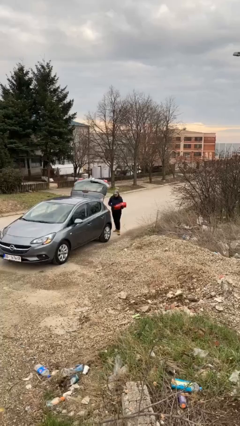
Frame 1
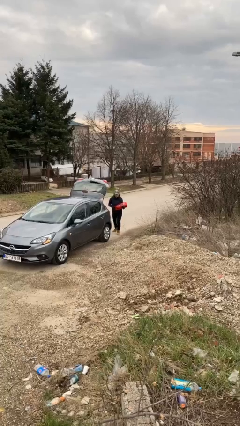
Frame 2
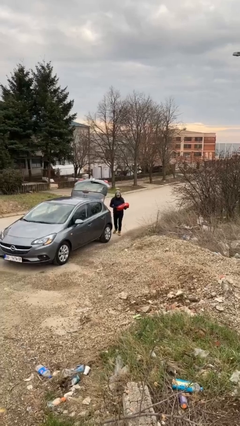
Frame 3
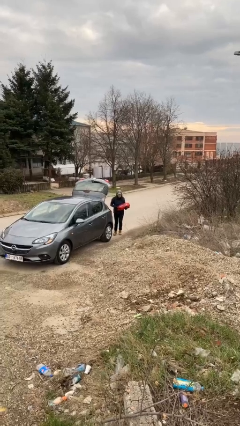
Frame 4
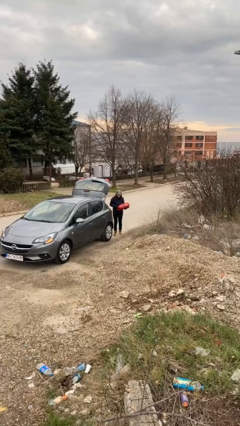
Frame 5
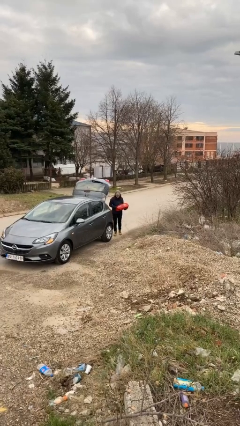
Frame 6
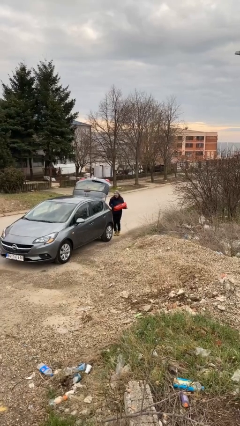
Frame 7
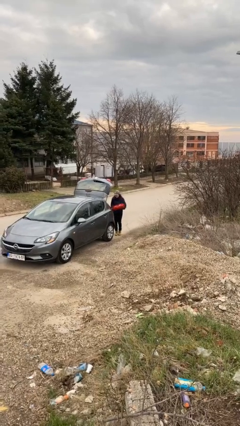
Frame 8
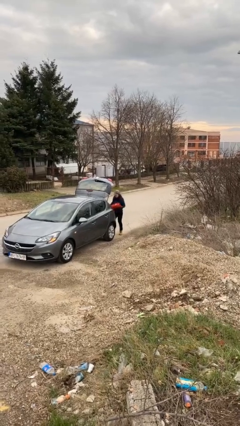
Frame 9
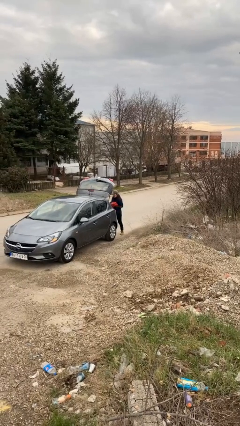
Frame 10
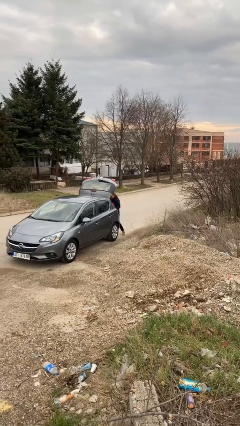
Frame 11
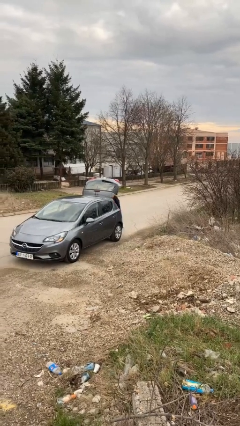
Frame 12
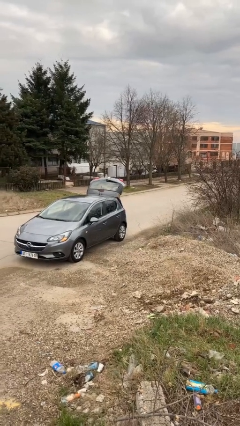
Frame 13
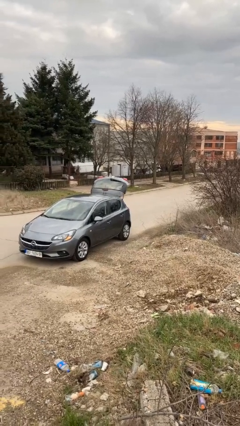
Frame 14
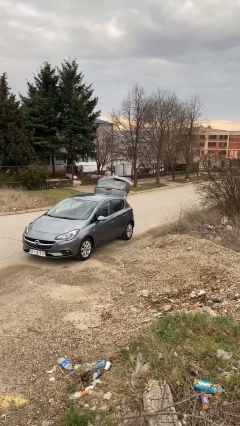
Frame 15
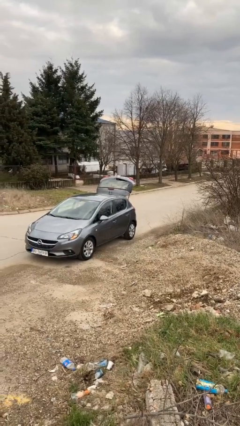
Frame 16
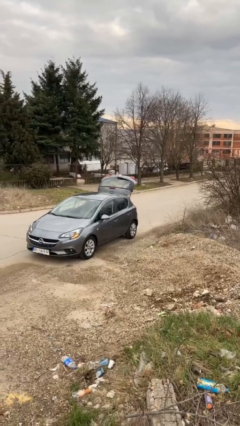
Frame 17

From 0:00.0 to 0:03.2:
person loads car

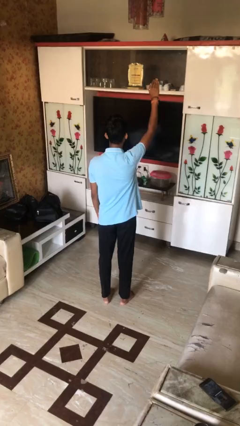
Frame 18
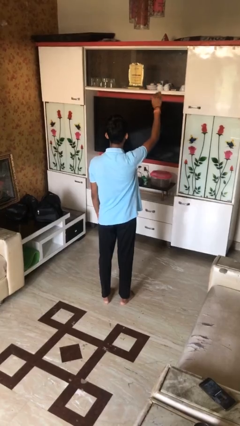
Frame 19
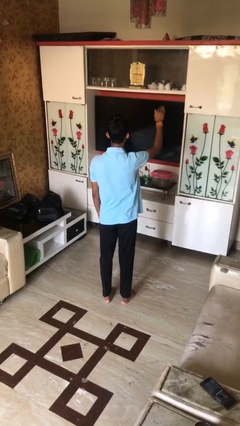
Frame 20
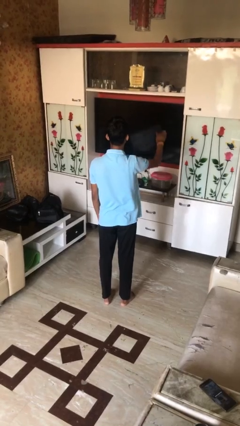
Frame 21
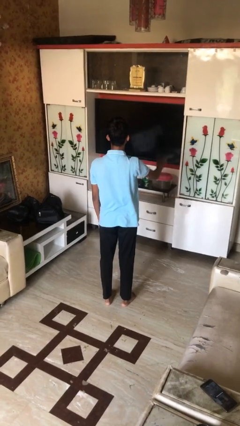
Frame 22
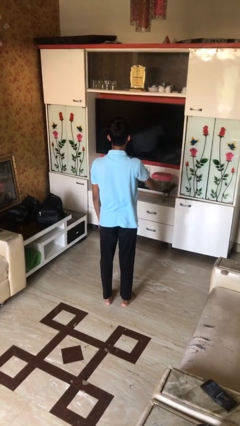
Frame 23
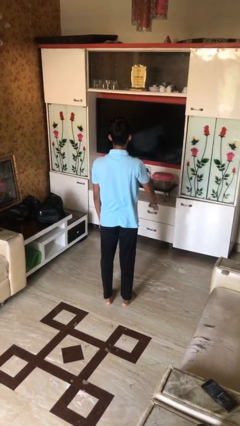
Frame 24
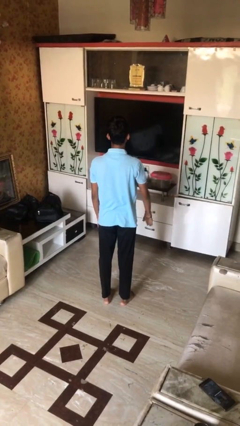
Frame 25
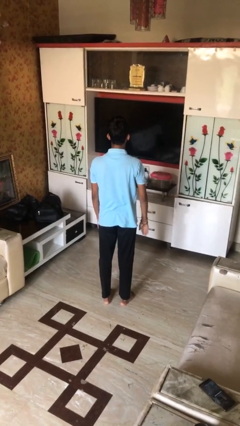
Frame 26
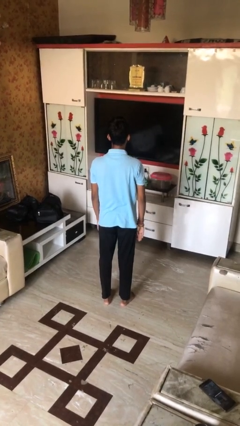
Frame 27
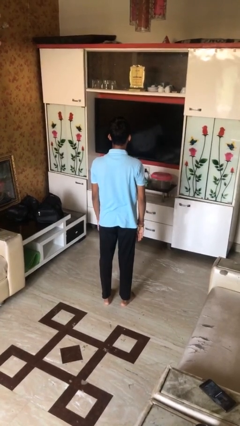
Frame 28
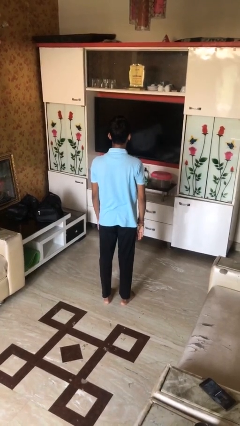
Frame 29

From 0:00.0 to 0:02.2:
person gestures lower hand

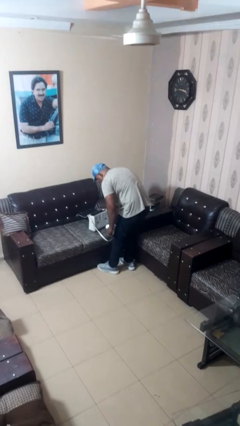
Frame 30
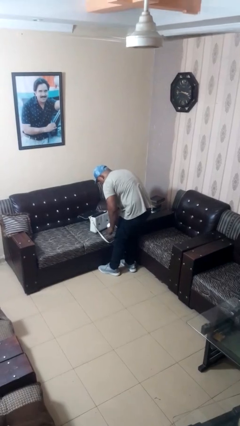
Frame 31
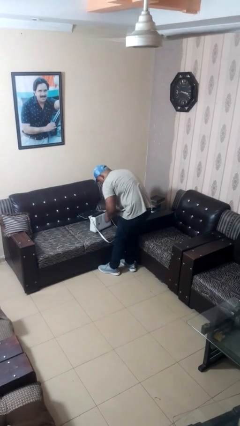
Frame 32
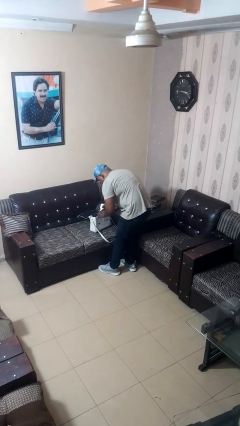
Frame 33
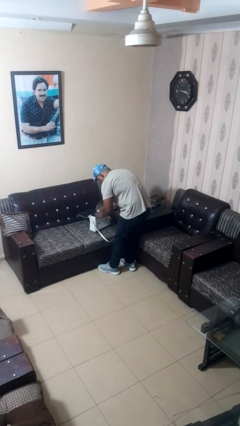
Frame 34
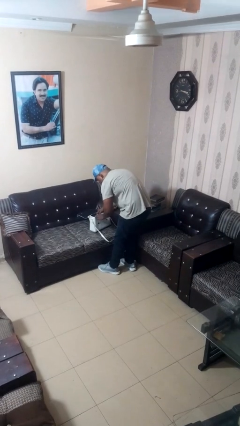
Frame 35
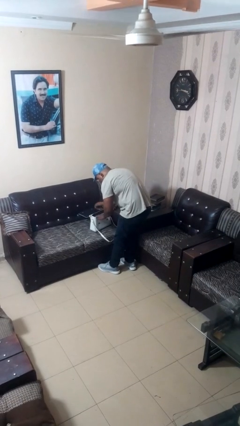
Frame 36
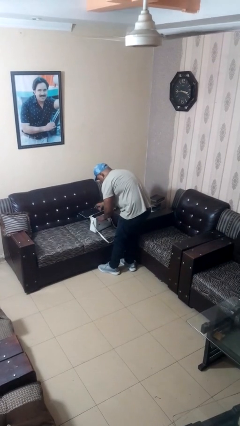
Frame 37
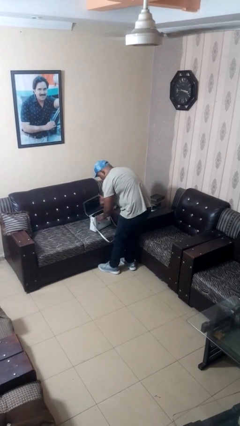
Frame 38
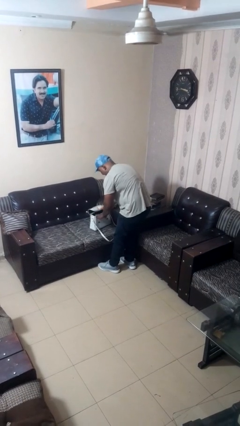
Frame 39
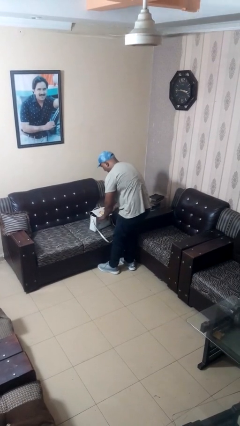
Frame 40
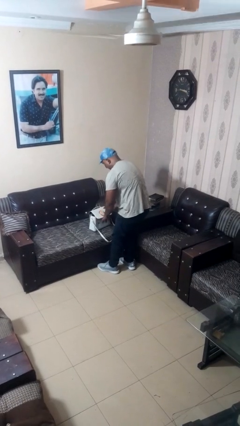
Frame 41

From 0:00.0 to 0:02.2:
person puts object into purse

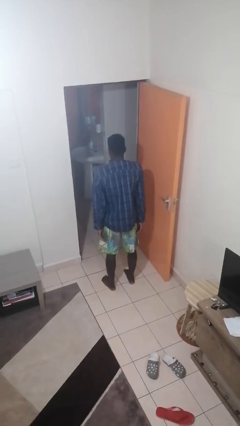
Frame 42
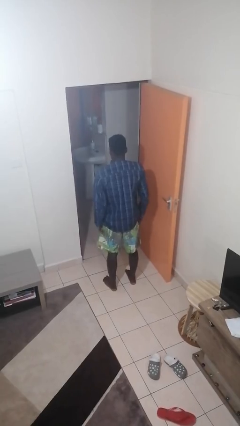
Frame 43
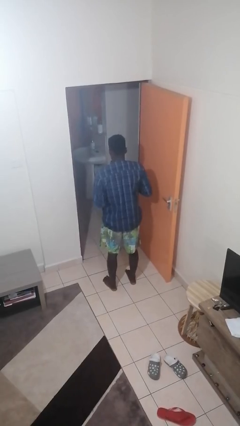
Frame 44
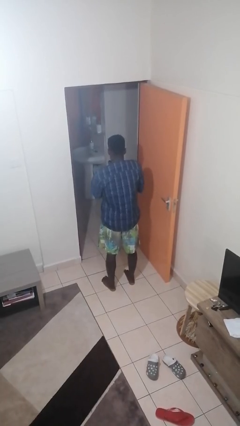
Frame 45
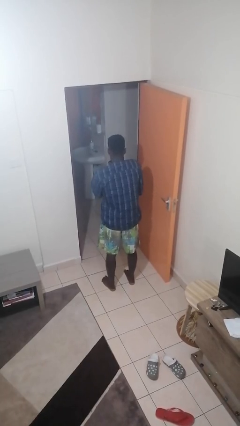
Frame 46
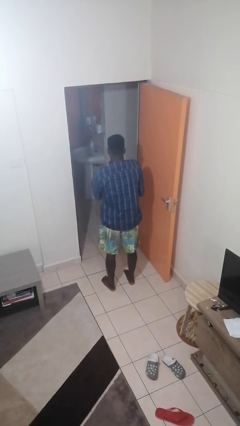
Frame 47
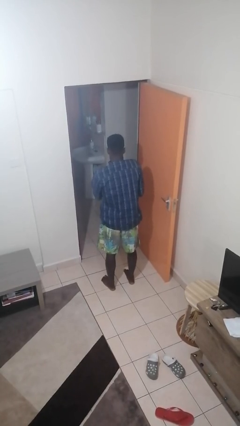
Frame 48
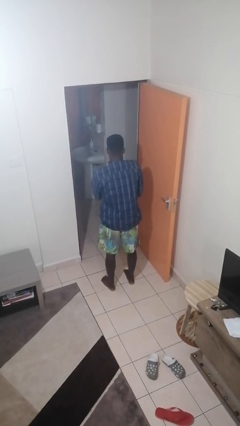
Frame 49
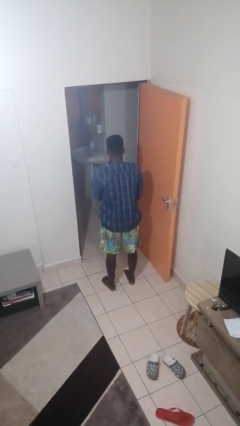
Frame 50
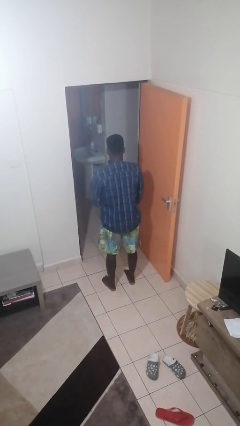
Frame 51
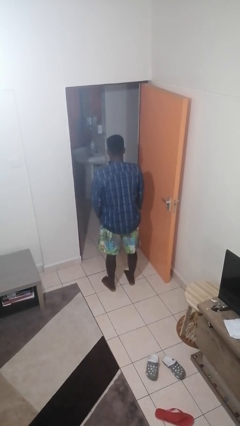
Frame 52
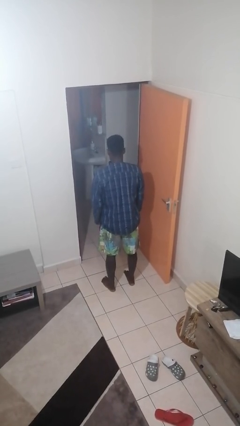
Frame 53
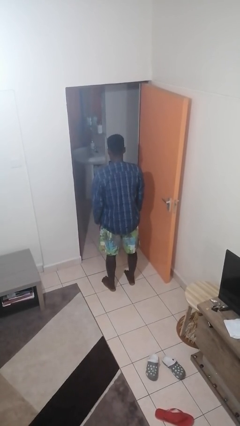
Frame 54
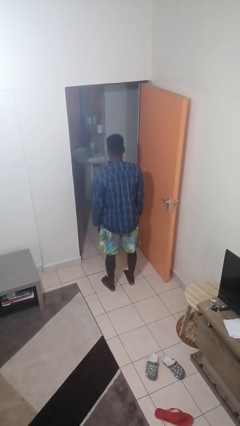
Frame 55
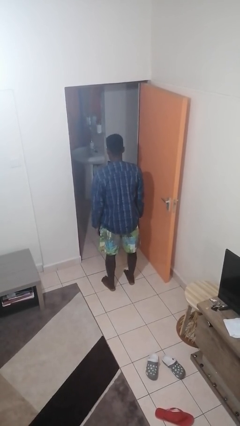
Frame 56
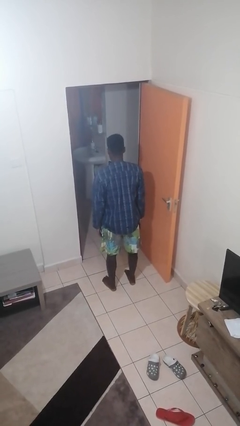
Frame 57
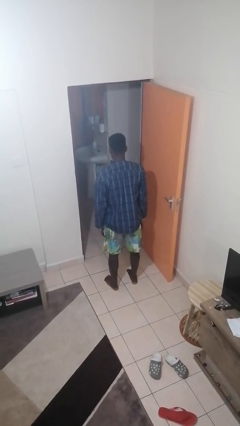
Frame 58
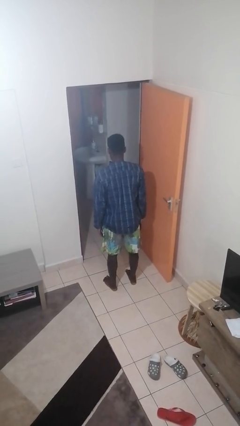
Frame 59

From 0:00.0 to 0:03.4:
person unzips jacket

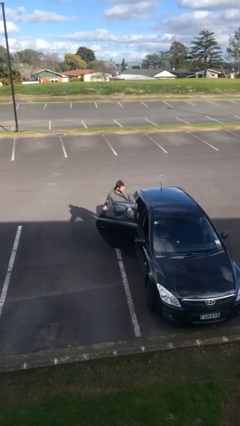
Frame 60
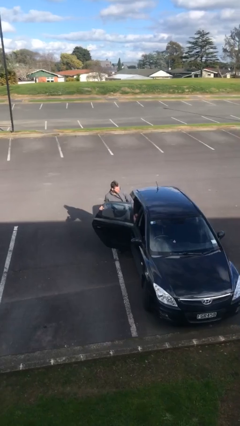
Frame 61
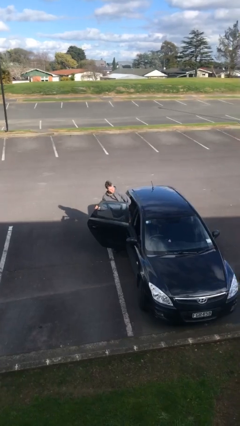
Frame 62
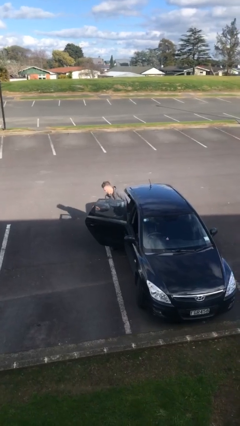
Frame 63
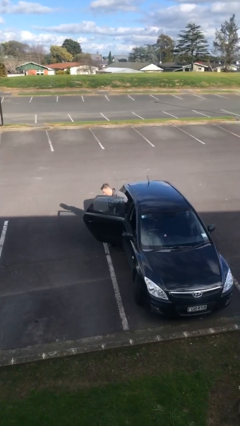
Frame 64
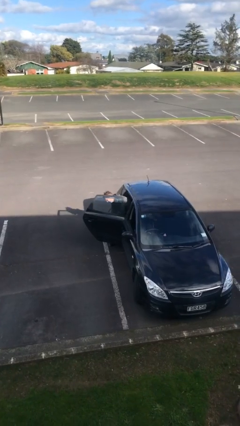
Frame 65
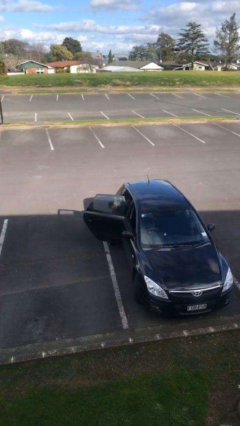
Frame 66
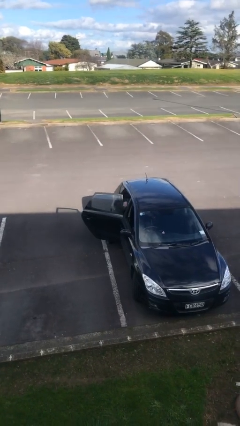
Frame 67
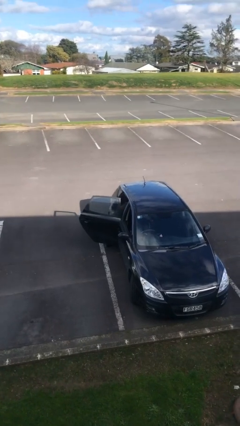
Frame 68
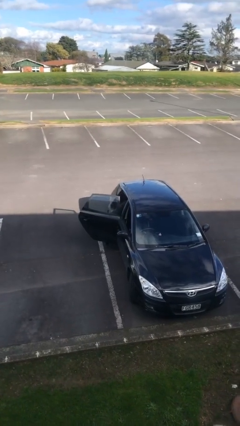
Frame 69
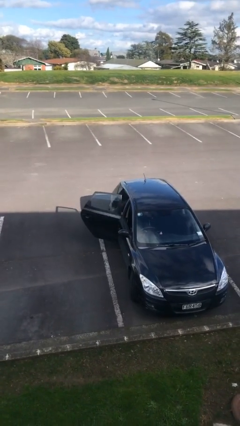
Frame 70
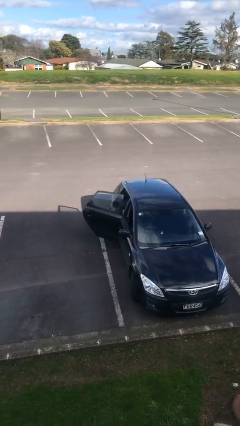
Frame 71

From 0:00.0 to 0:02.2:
person enters car

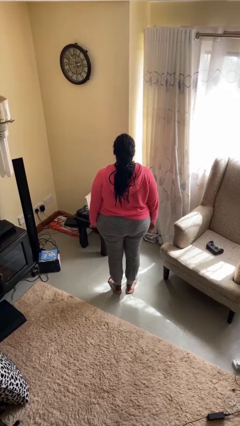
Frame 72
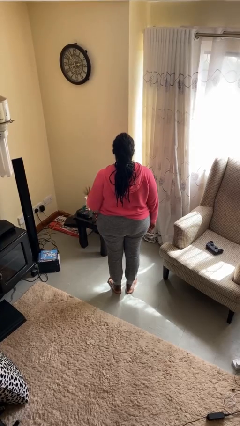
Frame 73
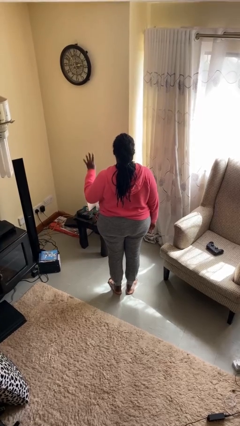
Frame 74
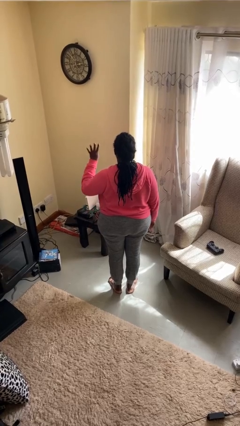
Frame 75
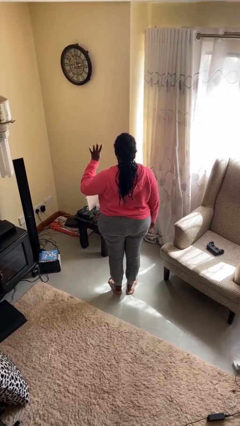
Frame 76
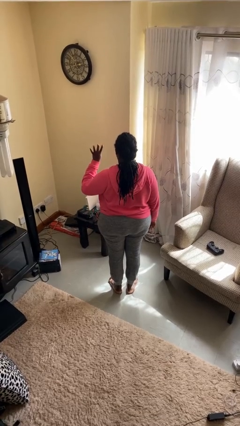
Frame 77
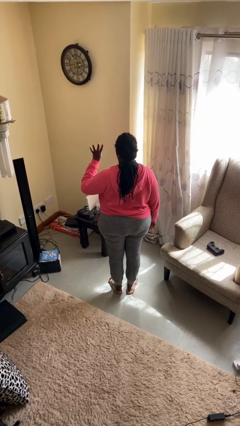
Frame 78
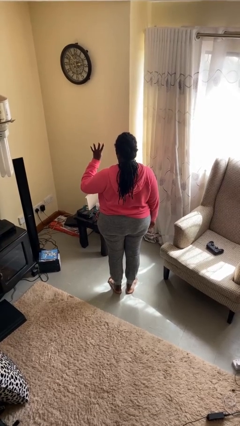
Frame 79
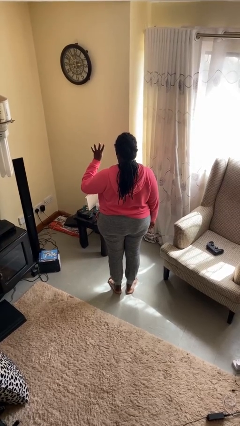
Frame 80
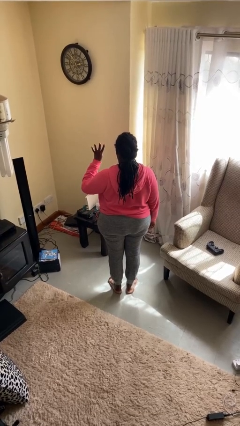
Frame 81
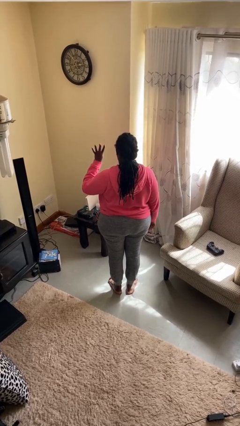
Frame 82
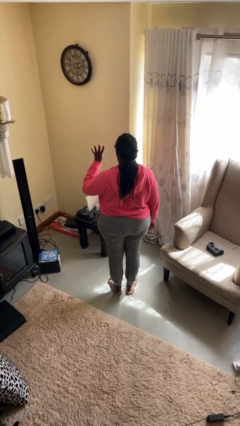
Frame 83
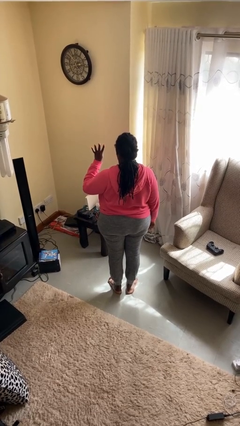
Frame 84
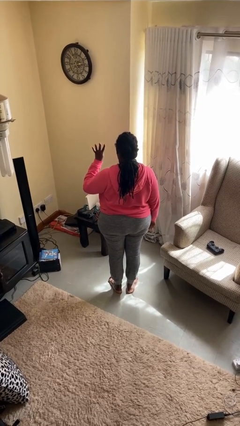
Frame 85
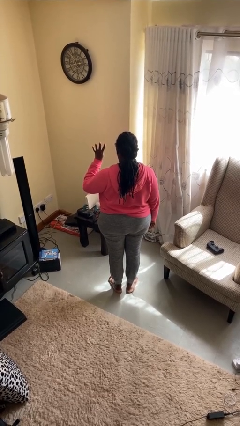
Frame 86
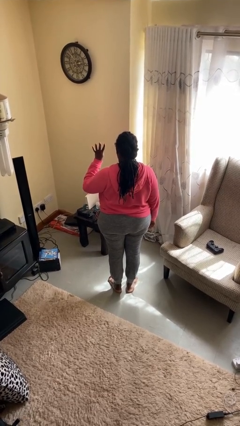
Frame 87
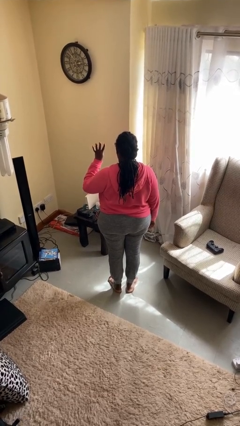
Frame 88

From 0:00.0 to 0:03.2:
person gestures number four

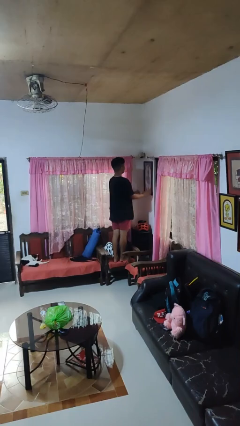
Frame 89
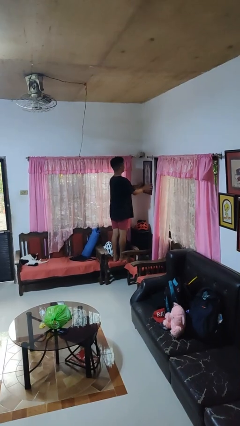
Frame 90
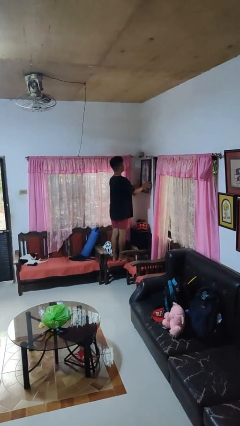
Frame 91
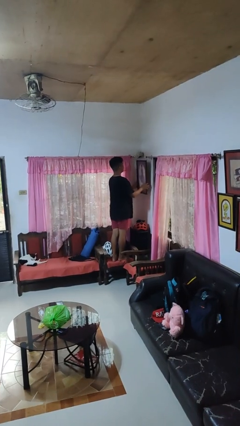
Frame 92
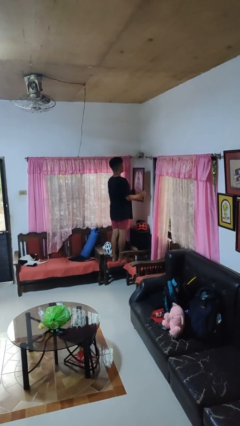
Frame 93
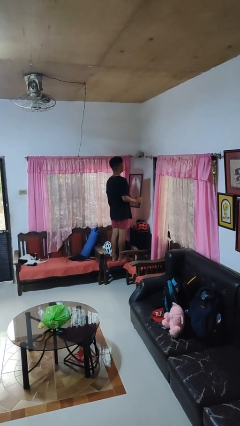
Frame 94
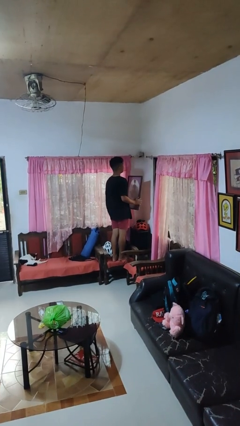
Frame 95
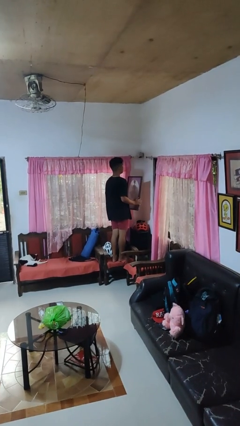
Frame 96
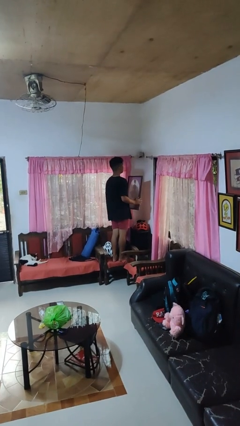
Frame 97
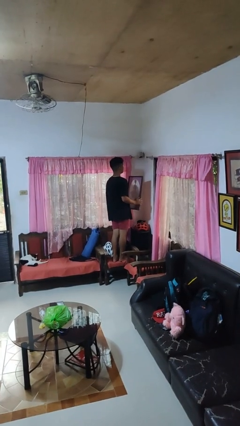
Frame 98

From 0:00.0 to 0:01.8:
person takes down picture frame
